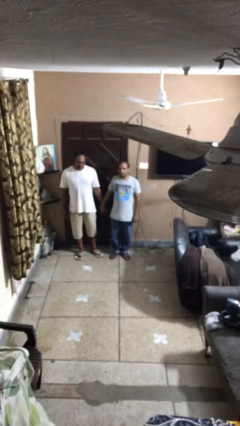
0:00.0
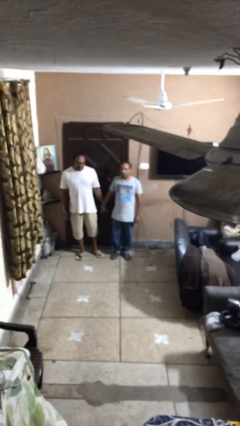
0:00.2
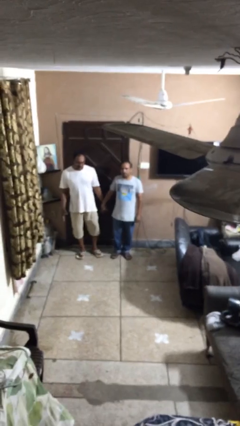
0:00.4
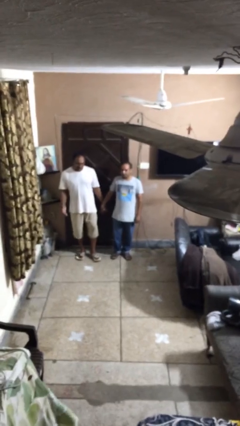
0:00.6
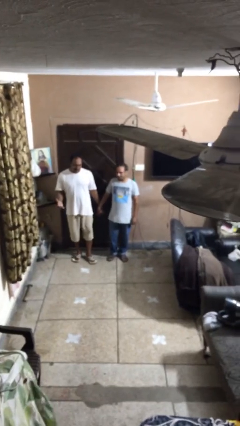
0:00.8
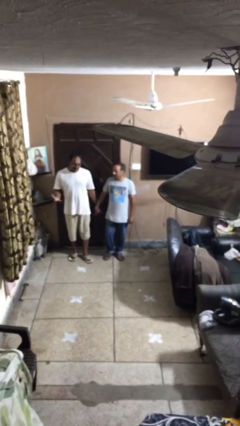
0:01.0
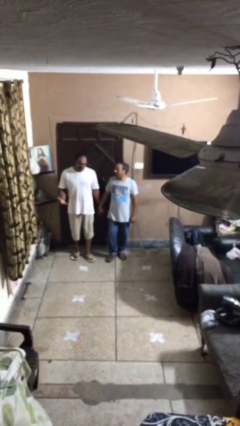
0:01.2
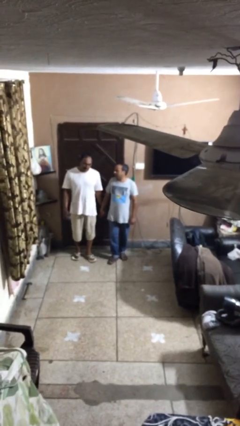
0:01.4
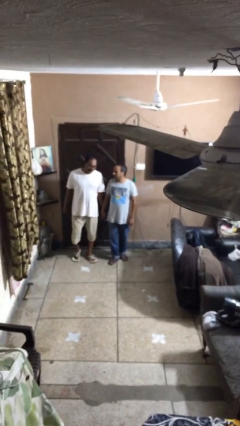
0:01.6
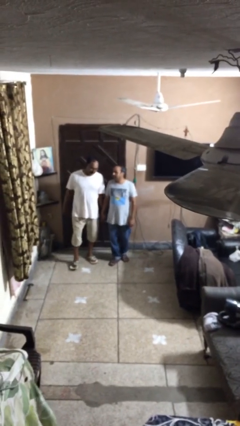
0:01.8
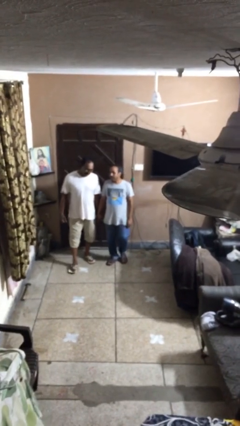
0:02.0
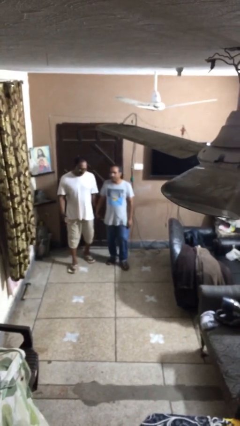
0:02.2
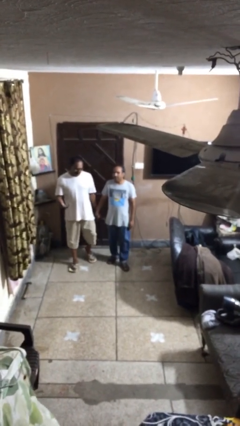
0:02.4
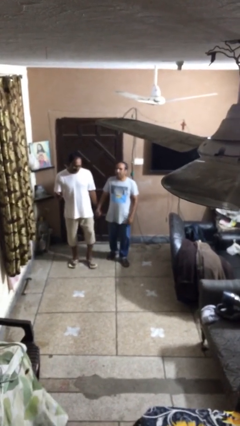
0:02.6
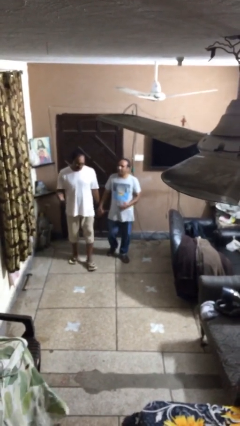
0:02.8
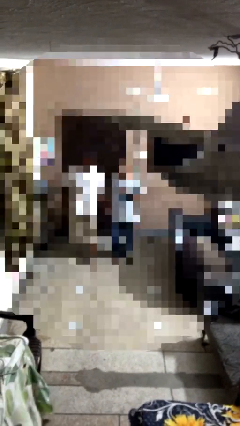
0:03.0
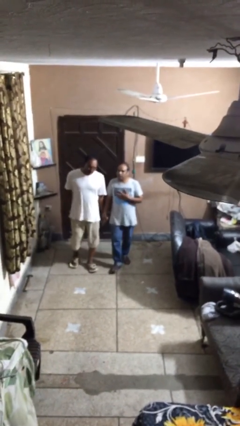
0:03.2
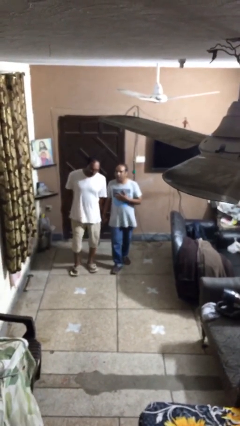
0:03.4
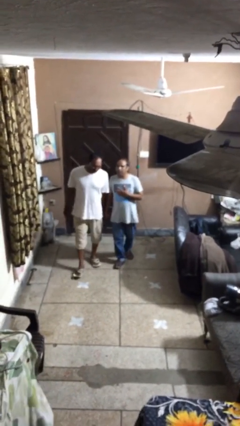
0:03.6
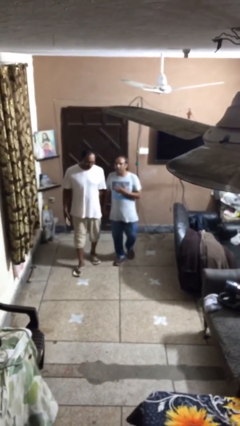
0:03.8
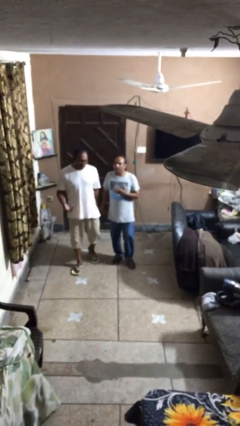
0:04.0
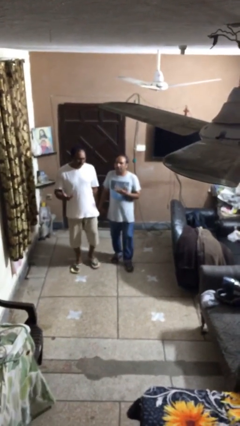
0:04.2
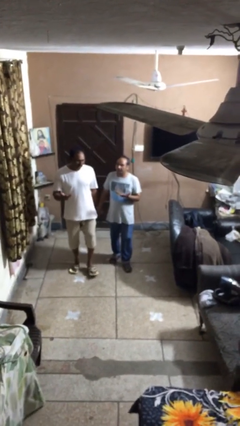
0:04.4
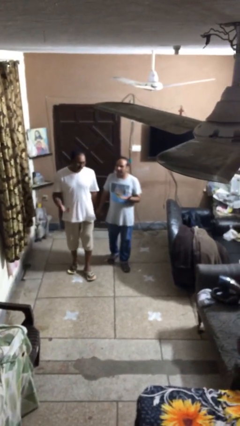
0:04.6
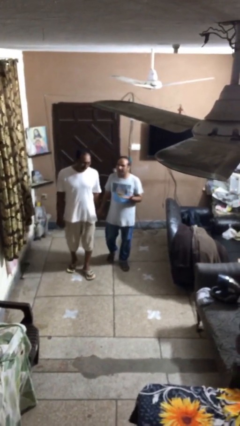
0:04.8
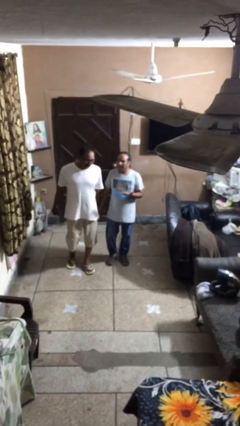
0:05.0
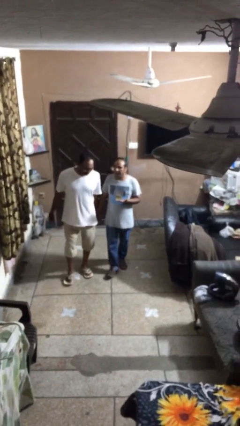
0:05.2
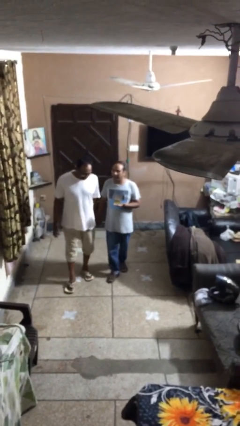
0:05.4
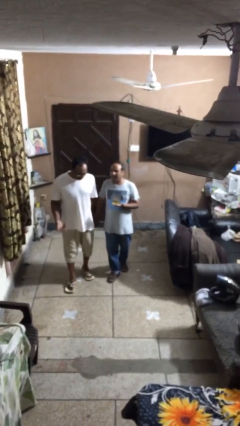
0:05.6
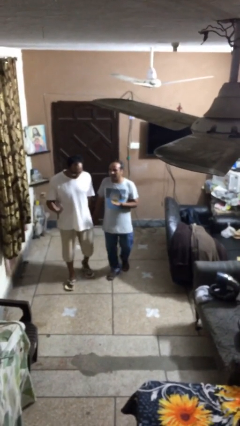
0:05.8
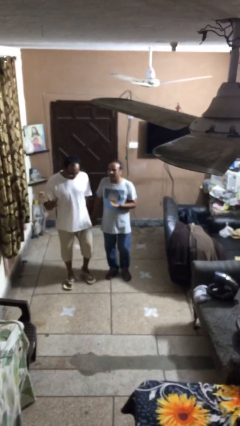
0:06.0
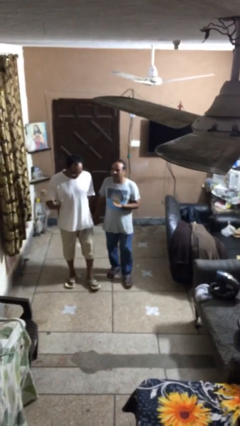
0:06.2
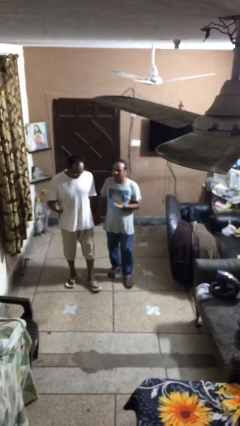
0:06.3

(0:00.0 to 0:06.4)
person holds hand

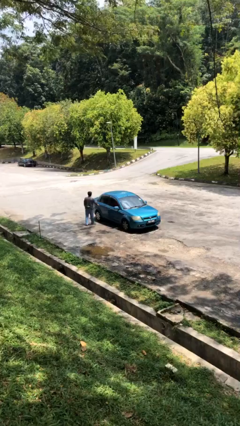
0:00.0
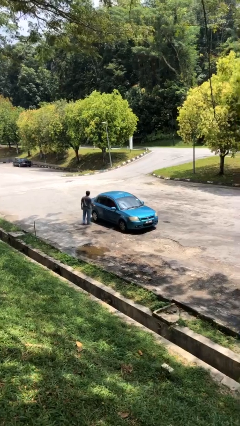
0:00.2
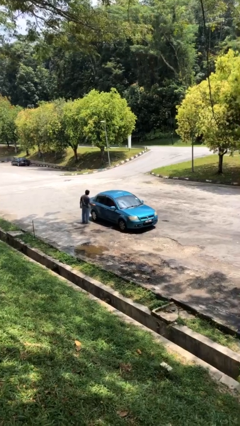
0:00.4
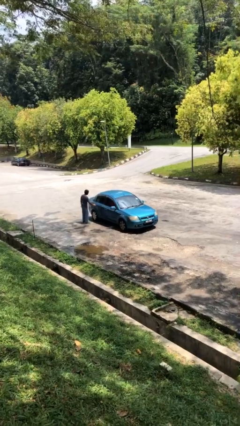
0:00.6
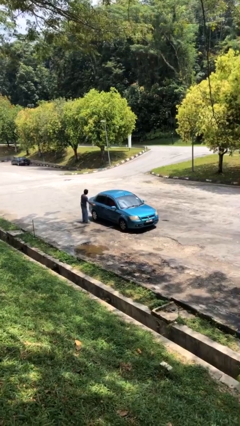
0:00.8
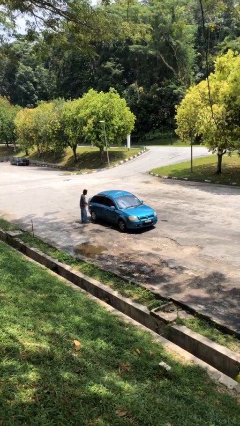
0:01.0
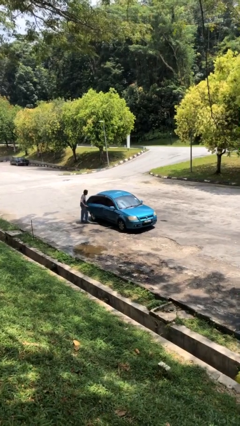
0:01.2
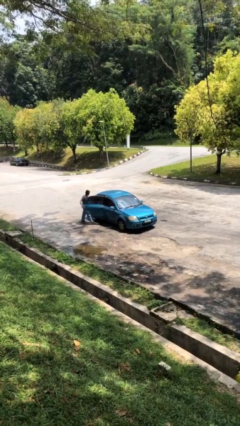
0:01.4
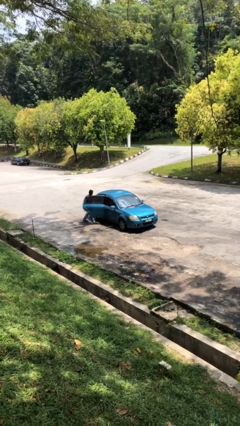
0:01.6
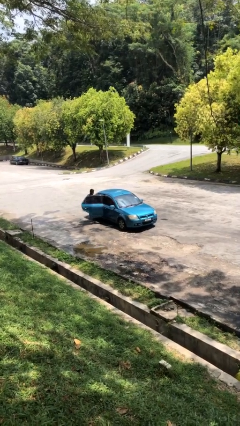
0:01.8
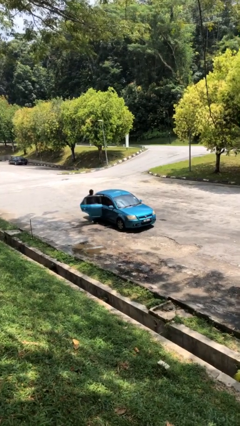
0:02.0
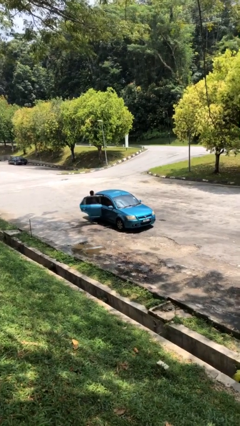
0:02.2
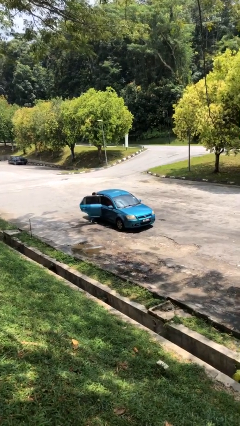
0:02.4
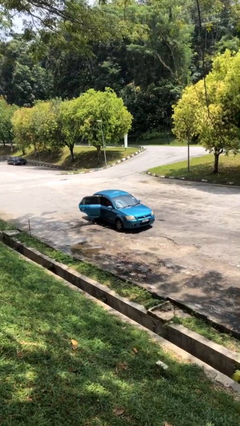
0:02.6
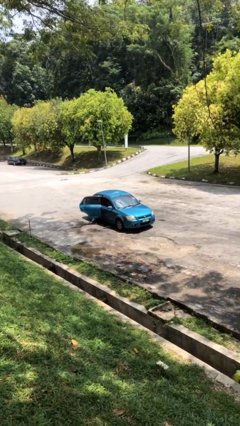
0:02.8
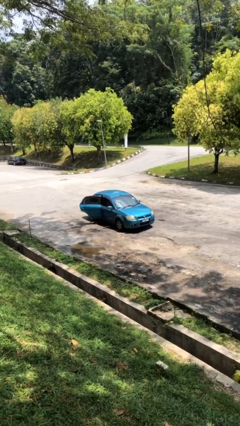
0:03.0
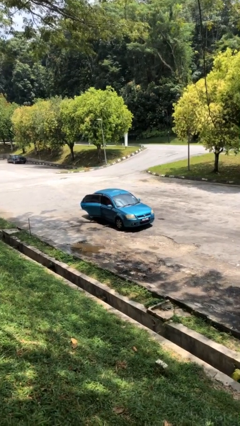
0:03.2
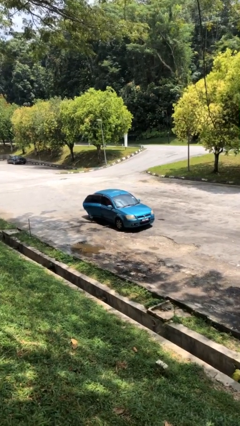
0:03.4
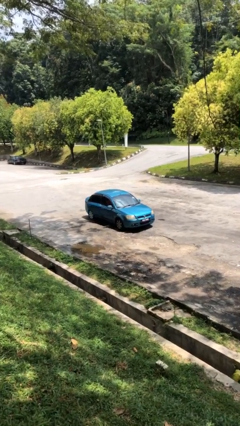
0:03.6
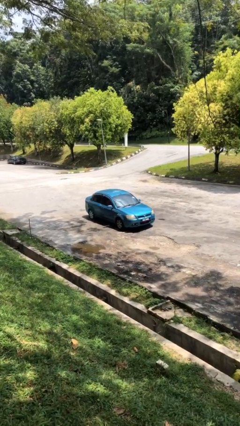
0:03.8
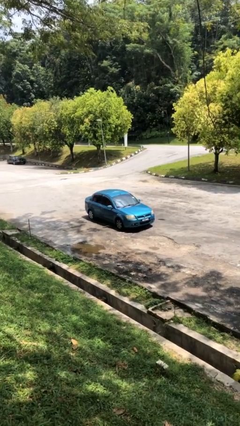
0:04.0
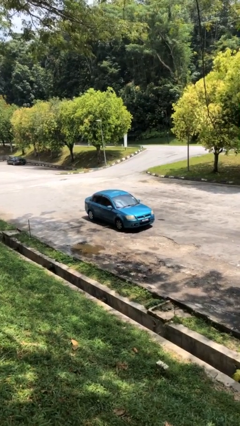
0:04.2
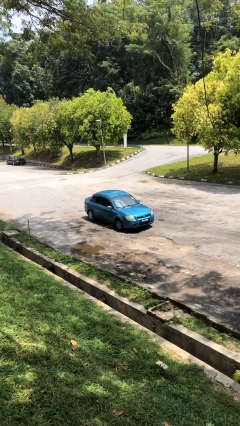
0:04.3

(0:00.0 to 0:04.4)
car picks up person

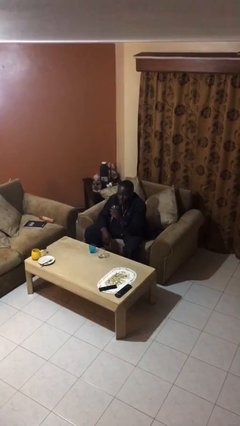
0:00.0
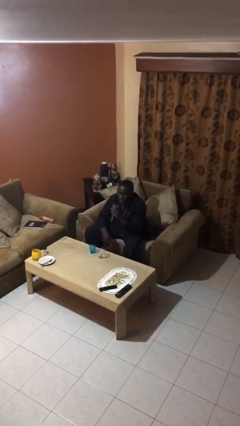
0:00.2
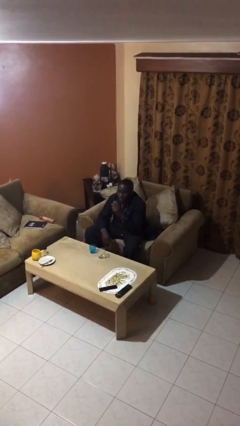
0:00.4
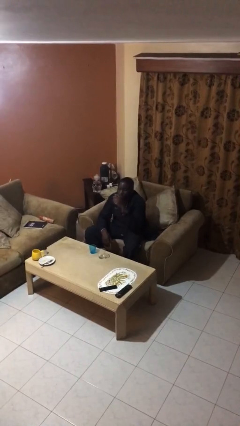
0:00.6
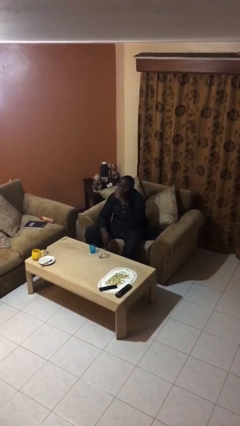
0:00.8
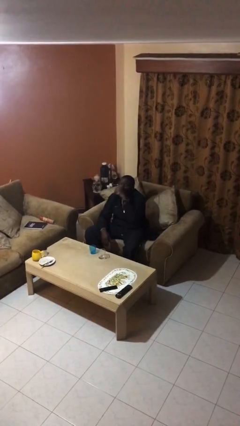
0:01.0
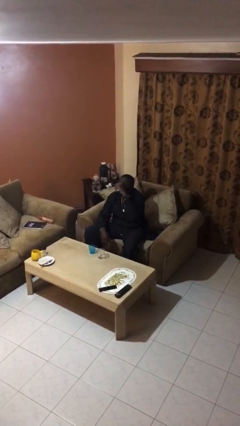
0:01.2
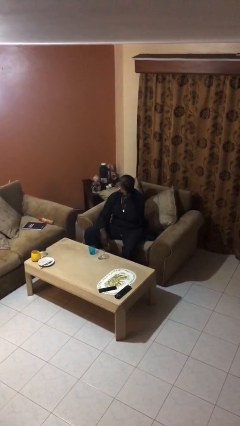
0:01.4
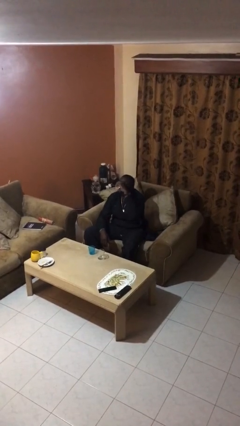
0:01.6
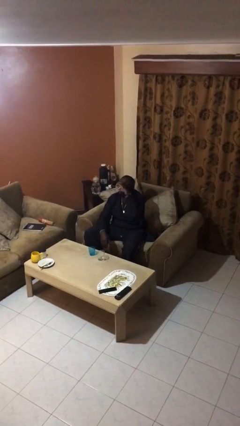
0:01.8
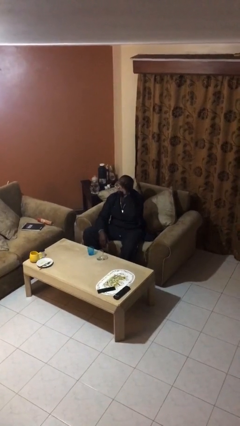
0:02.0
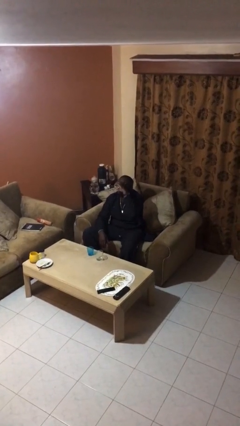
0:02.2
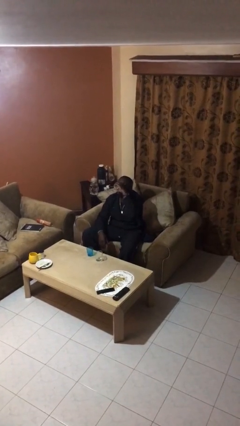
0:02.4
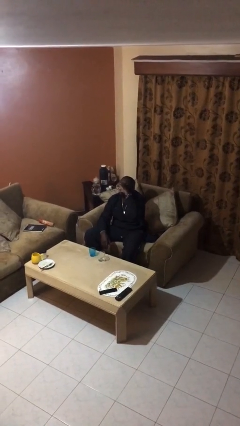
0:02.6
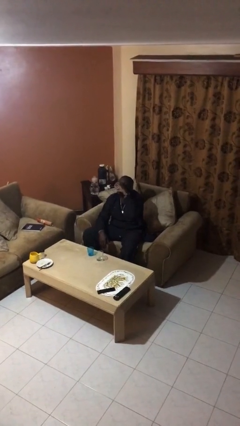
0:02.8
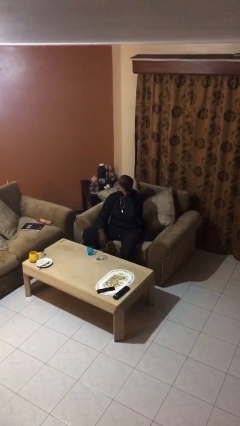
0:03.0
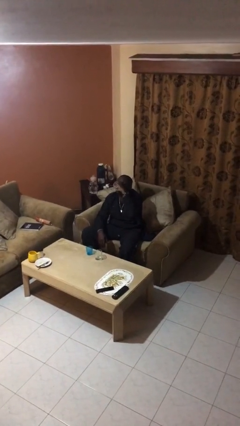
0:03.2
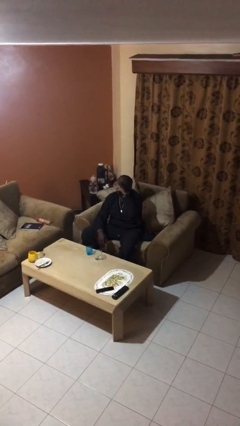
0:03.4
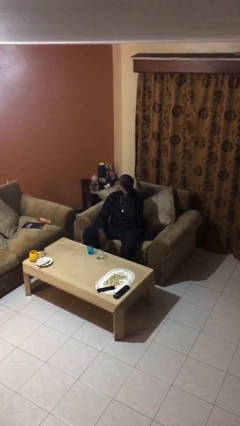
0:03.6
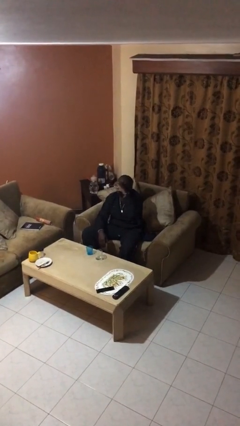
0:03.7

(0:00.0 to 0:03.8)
person drinks from shotglass

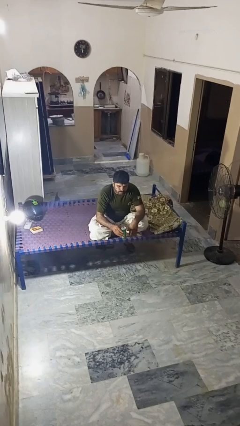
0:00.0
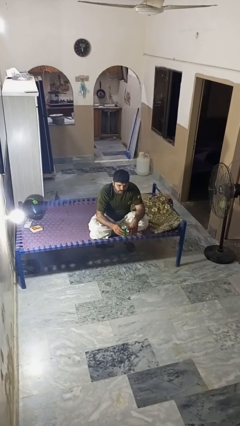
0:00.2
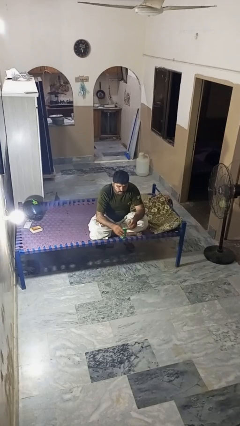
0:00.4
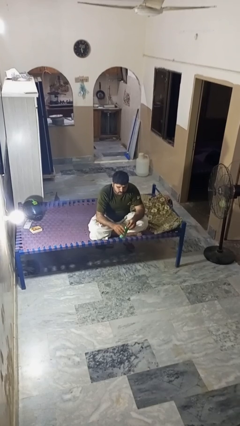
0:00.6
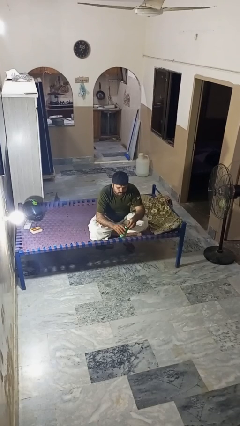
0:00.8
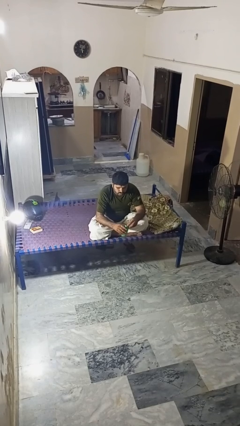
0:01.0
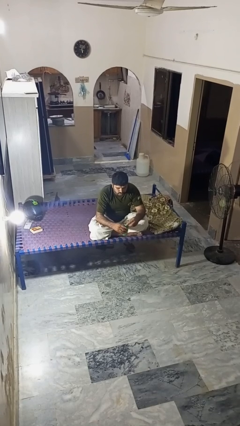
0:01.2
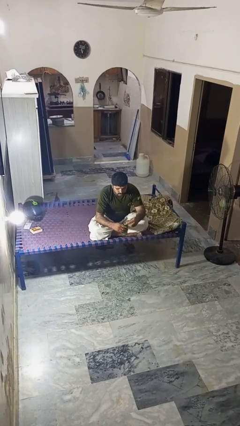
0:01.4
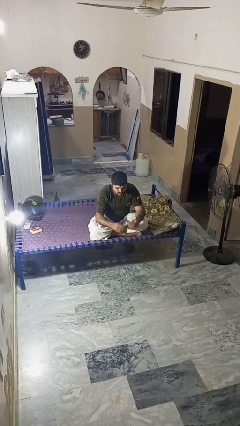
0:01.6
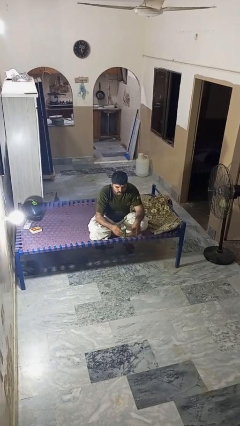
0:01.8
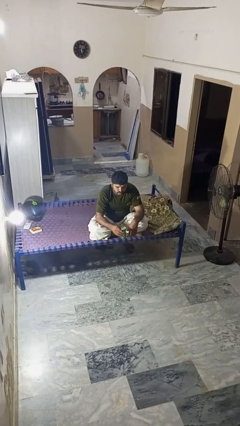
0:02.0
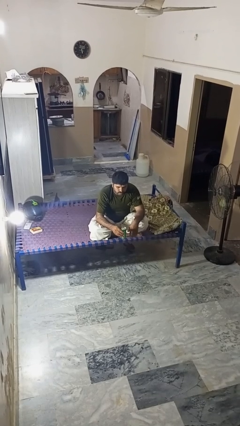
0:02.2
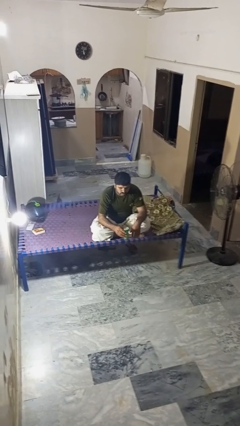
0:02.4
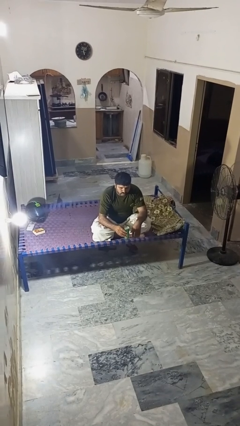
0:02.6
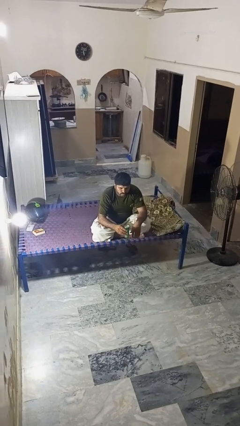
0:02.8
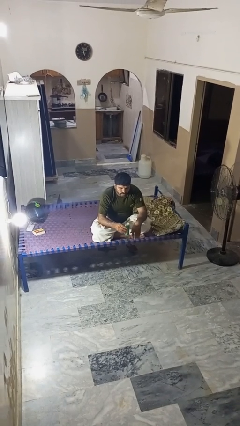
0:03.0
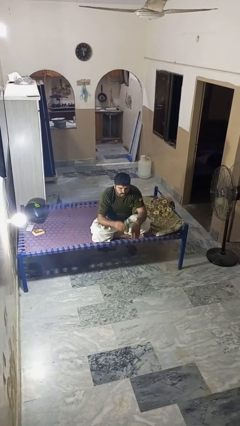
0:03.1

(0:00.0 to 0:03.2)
person opens beverage can
